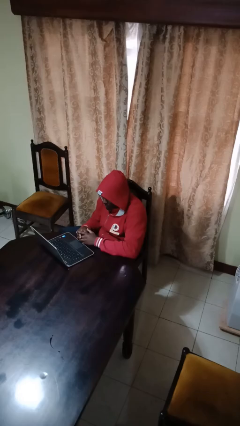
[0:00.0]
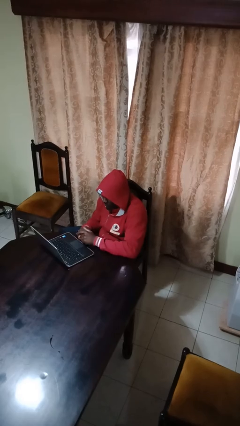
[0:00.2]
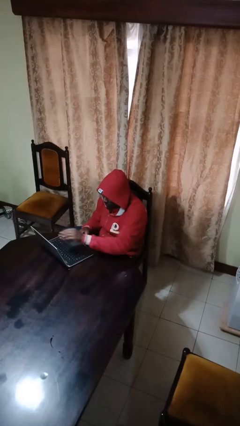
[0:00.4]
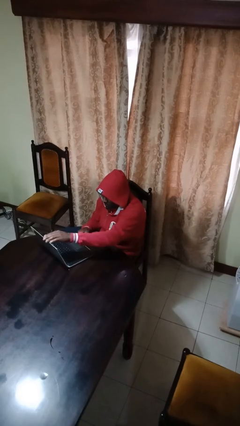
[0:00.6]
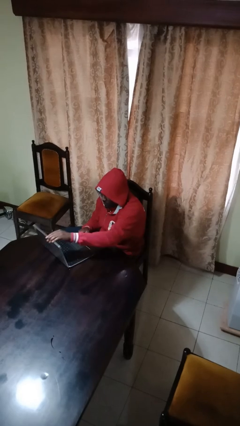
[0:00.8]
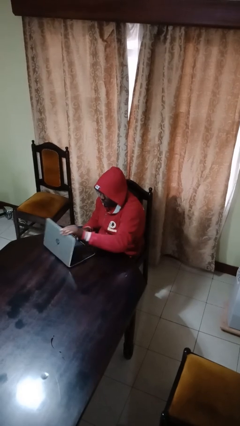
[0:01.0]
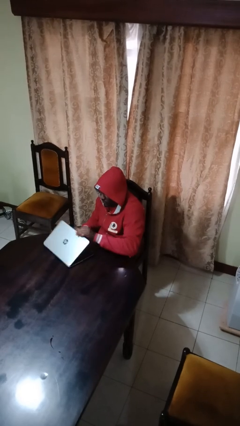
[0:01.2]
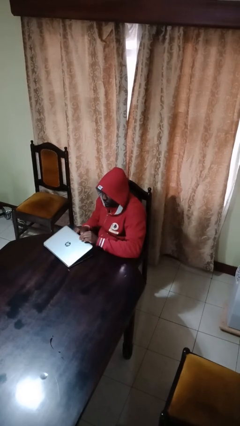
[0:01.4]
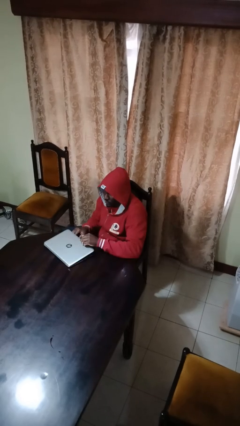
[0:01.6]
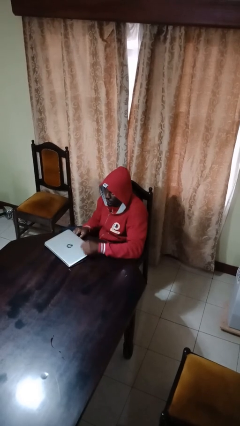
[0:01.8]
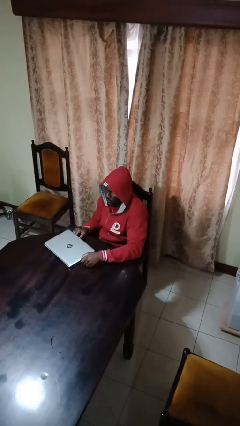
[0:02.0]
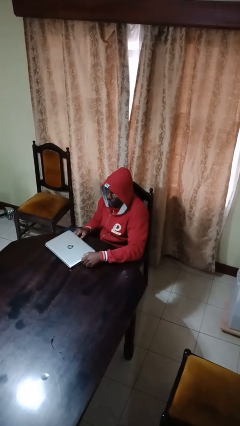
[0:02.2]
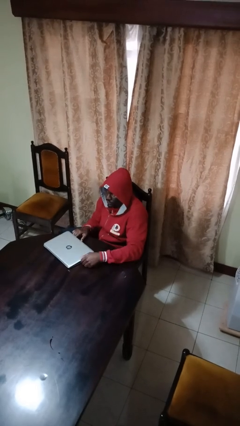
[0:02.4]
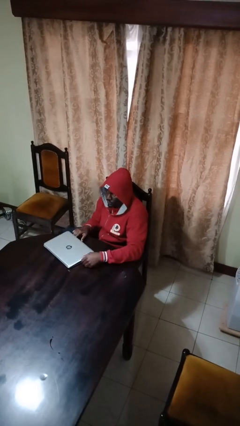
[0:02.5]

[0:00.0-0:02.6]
person closes laptop

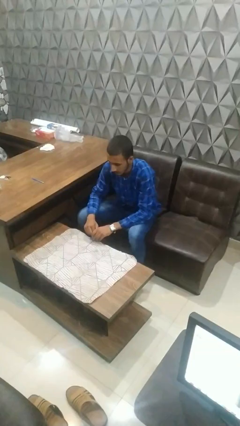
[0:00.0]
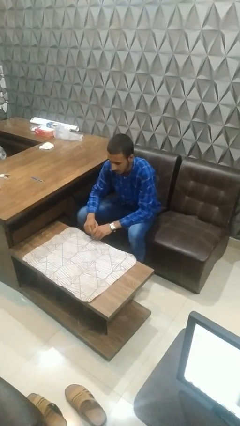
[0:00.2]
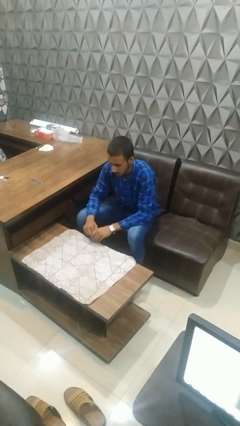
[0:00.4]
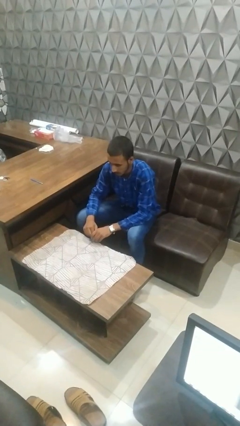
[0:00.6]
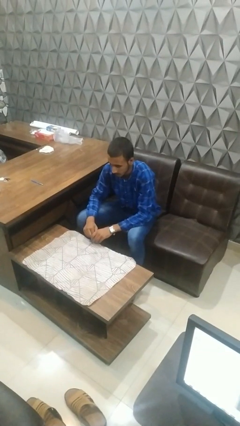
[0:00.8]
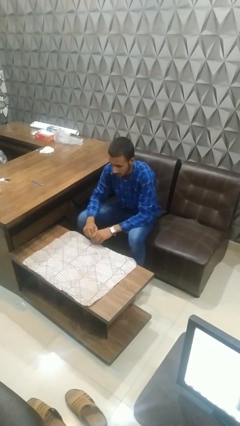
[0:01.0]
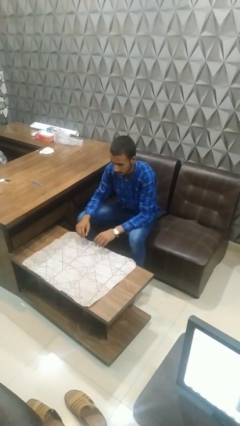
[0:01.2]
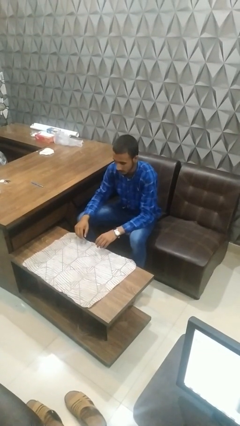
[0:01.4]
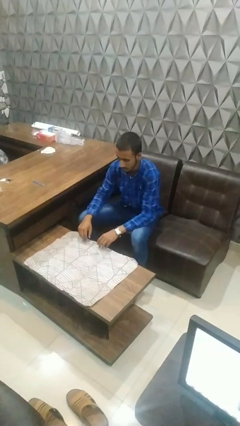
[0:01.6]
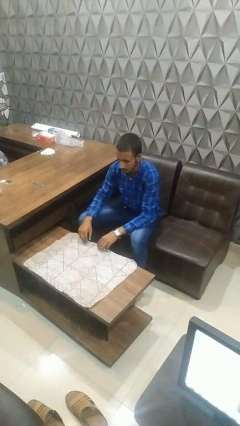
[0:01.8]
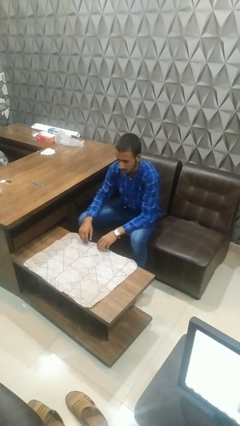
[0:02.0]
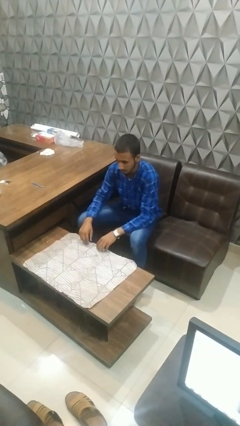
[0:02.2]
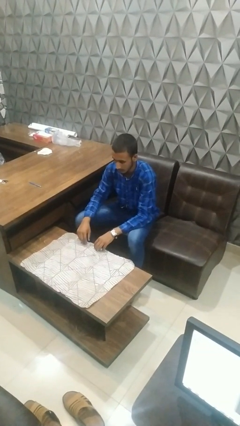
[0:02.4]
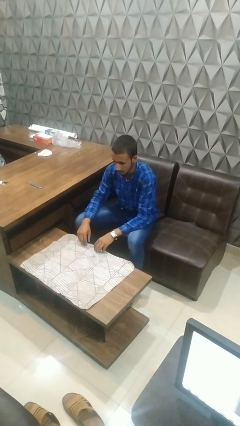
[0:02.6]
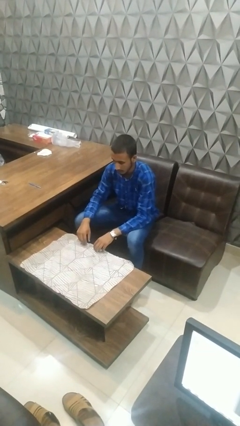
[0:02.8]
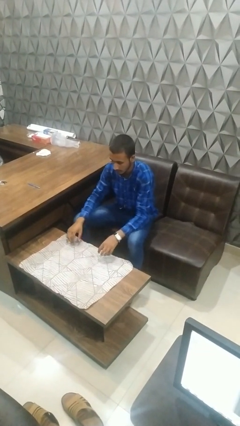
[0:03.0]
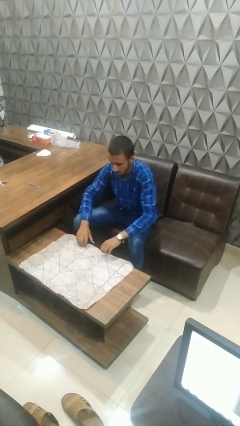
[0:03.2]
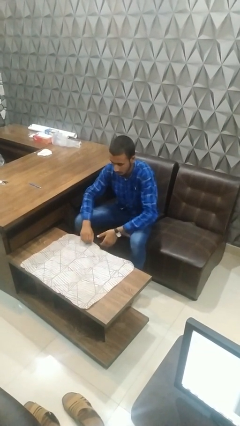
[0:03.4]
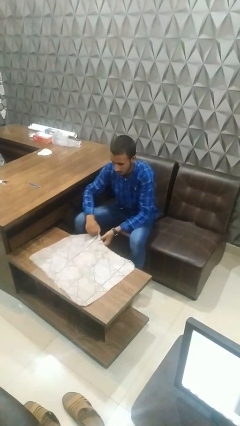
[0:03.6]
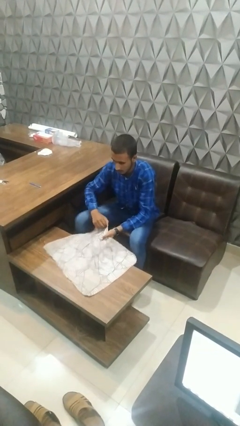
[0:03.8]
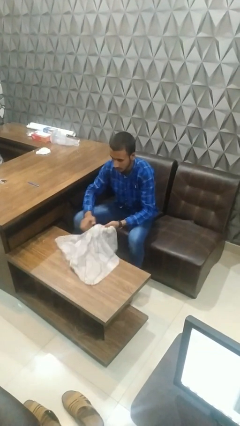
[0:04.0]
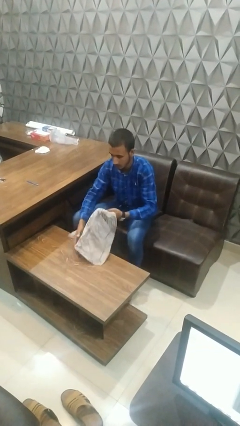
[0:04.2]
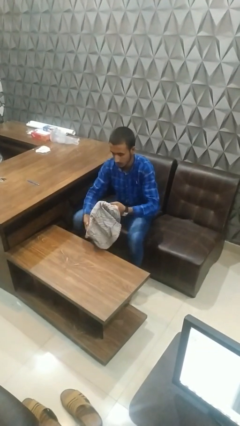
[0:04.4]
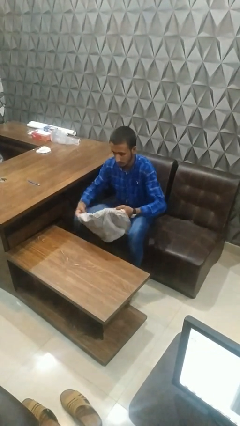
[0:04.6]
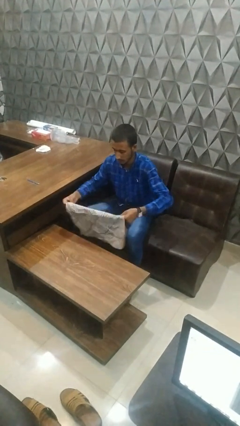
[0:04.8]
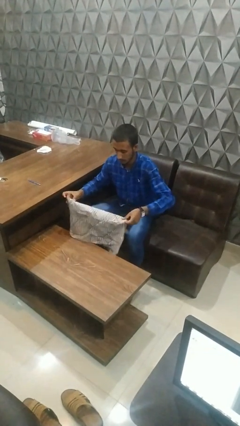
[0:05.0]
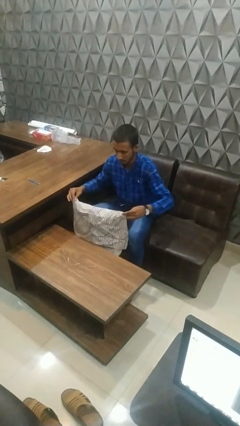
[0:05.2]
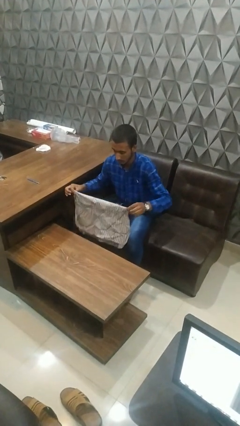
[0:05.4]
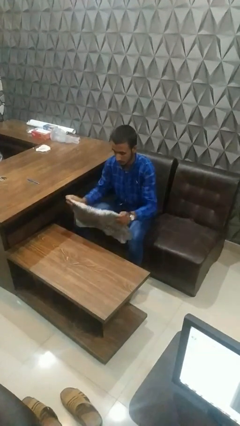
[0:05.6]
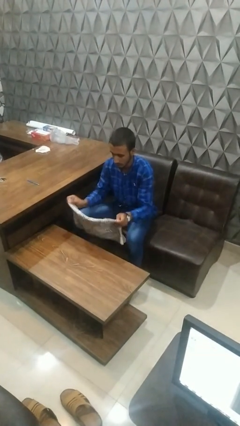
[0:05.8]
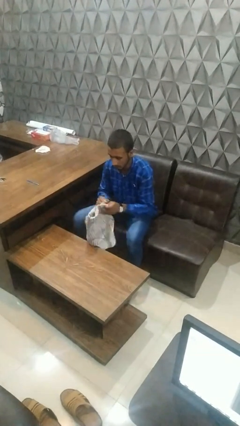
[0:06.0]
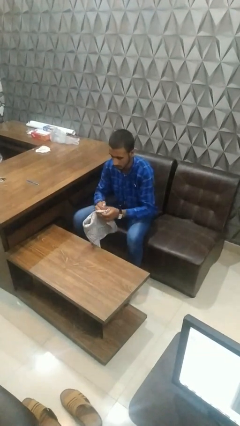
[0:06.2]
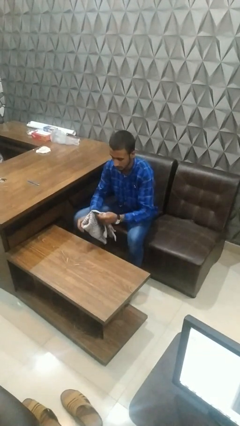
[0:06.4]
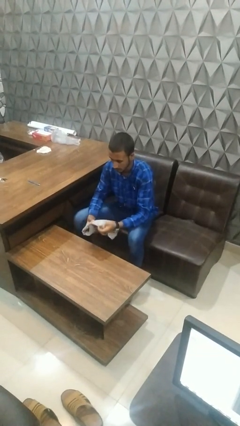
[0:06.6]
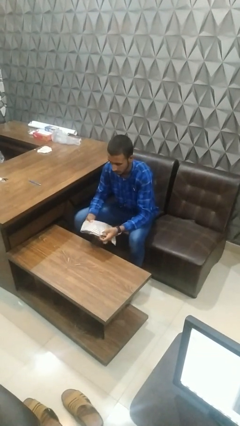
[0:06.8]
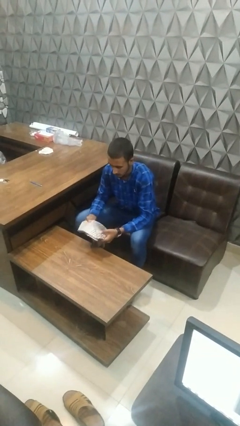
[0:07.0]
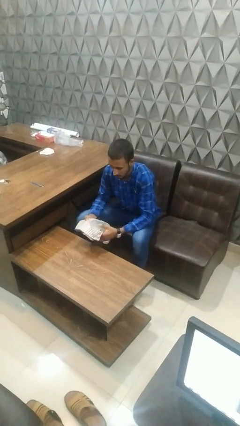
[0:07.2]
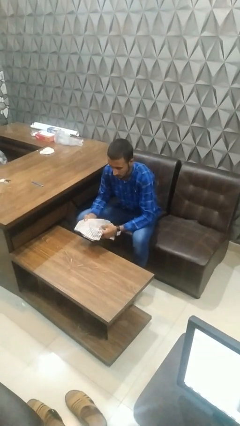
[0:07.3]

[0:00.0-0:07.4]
person folds tablecloth

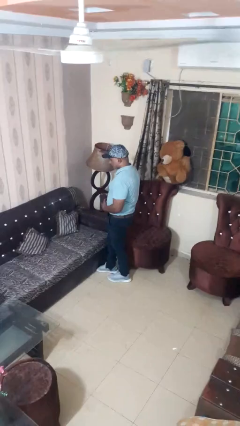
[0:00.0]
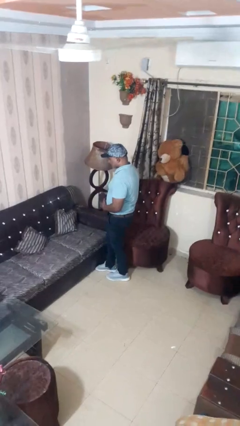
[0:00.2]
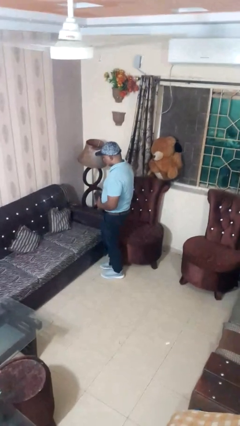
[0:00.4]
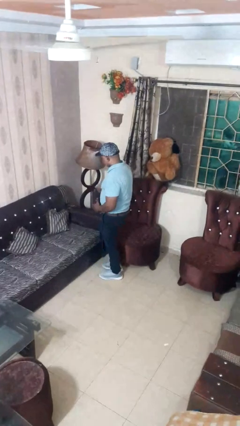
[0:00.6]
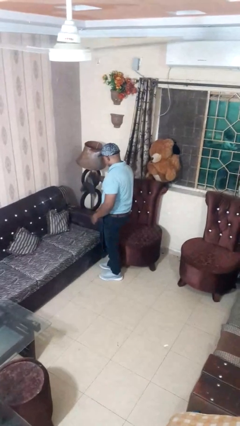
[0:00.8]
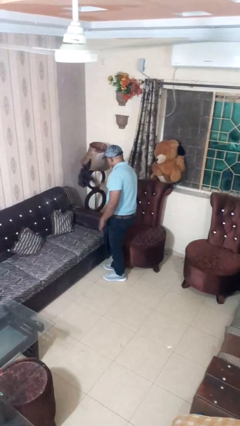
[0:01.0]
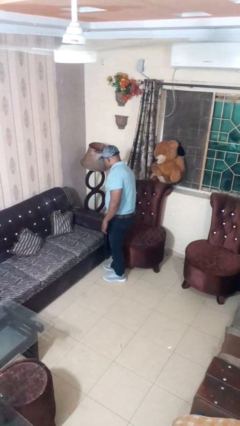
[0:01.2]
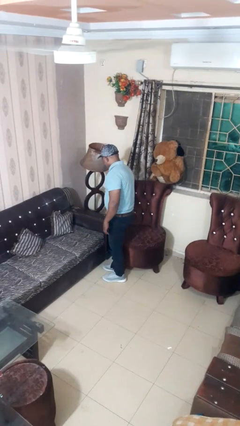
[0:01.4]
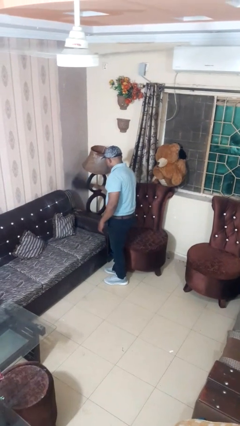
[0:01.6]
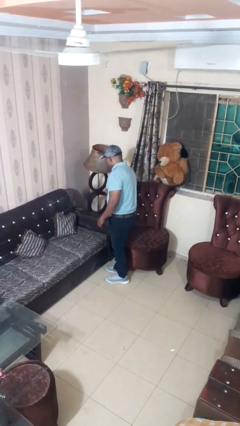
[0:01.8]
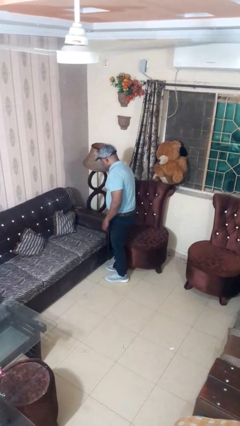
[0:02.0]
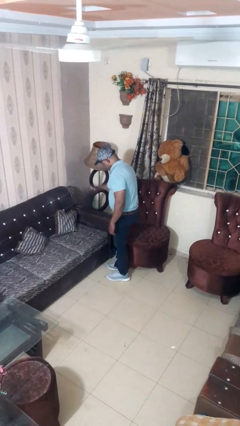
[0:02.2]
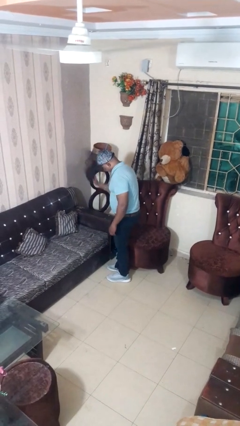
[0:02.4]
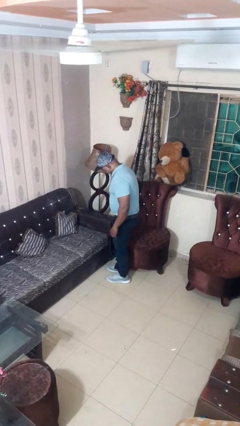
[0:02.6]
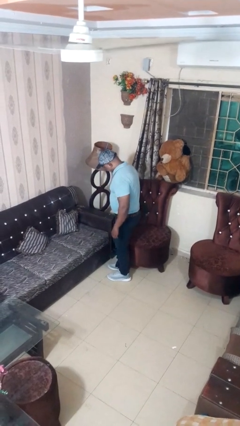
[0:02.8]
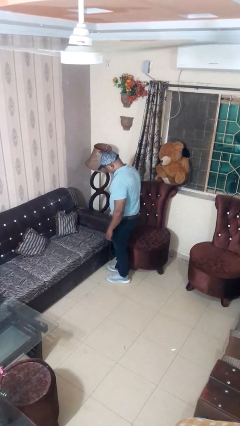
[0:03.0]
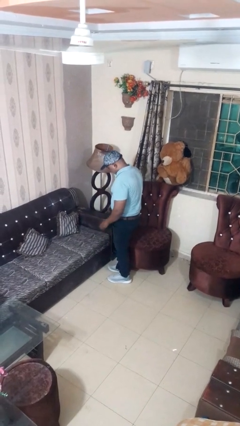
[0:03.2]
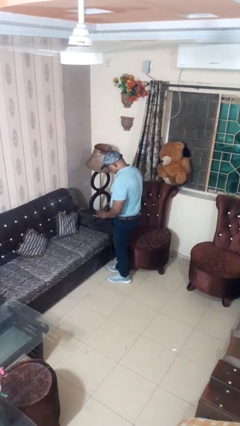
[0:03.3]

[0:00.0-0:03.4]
person dusts furniture

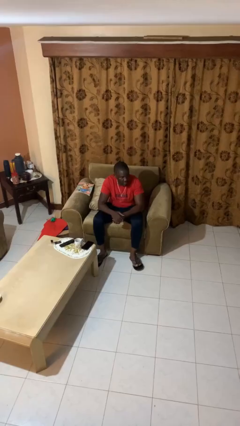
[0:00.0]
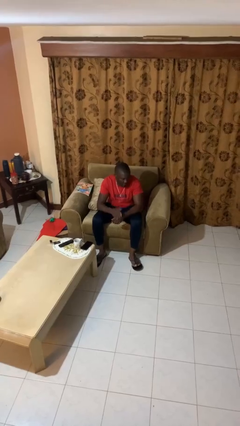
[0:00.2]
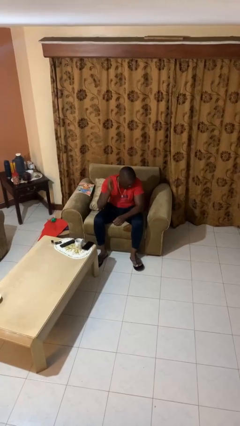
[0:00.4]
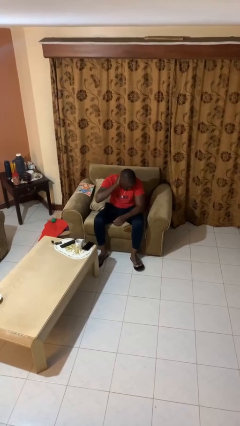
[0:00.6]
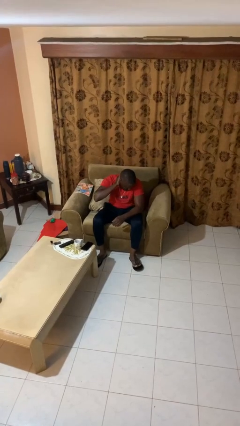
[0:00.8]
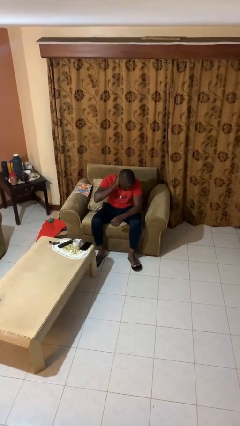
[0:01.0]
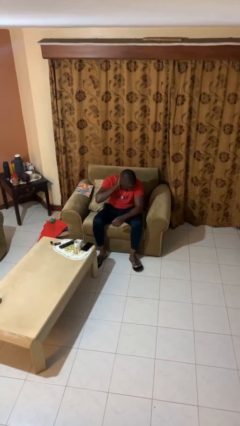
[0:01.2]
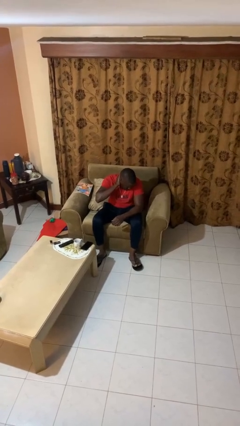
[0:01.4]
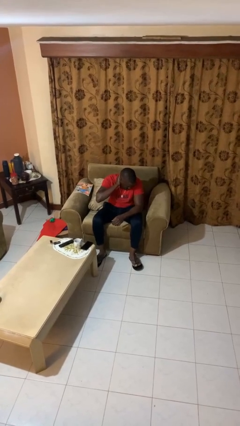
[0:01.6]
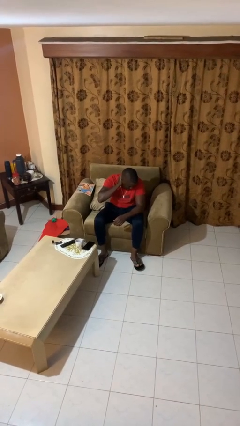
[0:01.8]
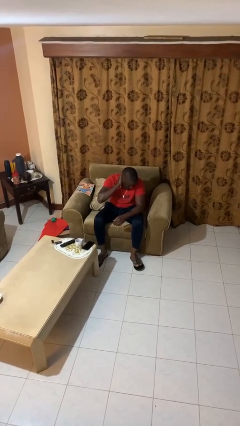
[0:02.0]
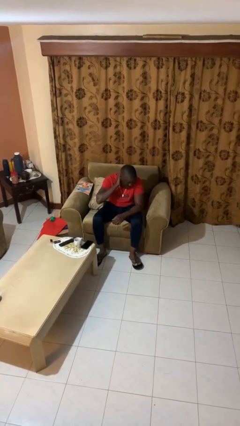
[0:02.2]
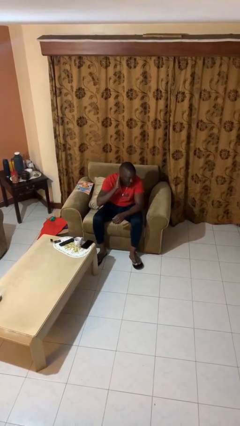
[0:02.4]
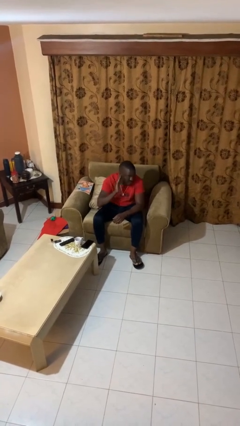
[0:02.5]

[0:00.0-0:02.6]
person swats bug

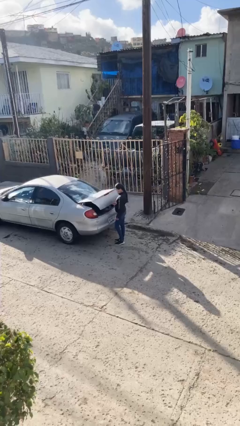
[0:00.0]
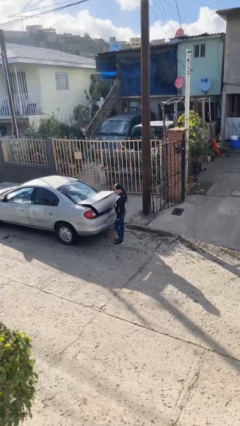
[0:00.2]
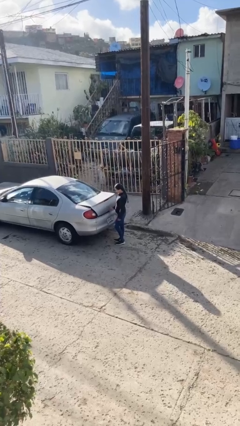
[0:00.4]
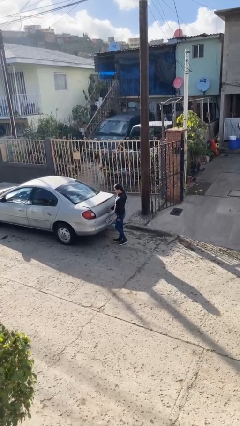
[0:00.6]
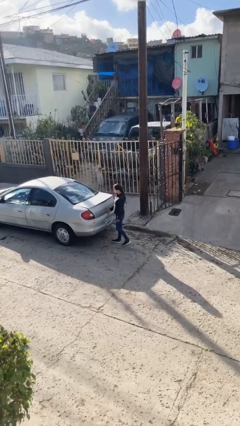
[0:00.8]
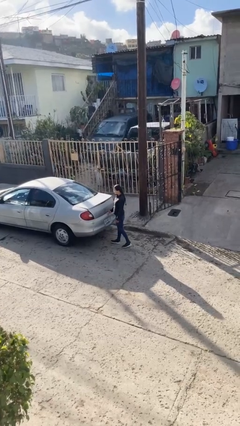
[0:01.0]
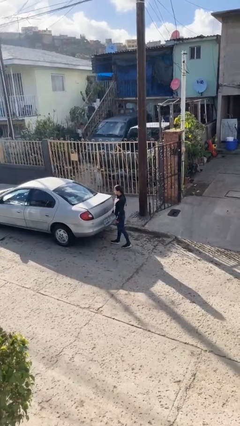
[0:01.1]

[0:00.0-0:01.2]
person closes car trunk

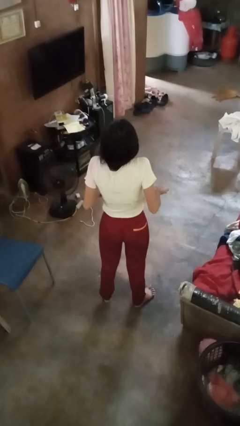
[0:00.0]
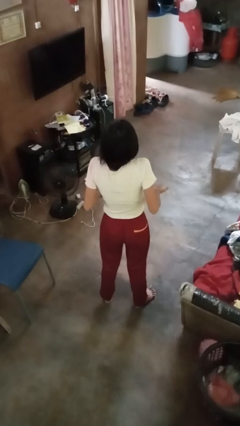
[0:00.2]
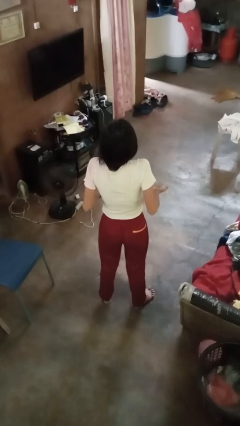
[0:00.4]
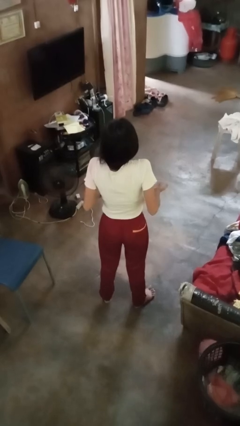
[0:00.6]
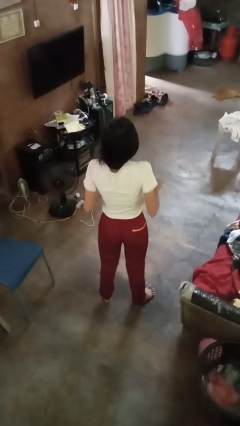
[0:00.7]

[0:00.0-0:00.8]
person shrugs
